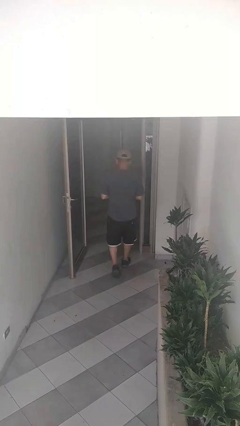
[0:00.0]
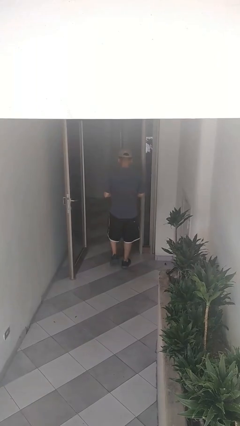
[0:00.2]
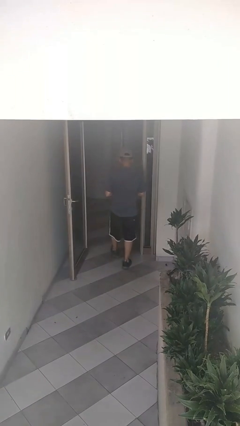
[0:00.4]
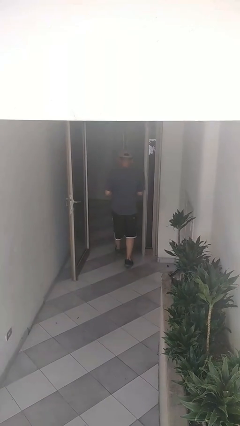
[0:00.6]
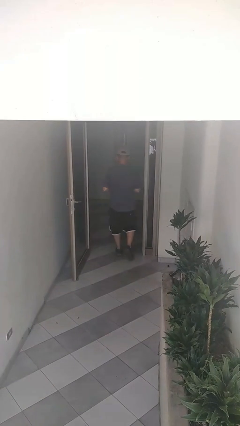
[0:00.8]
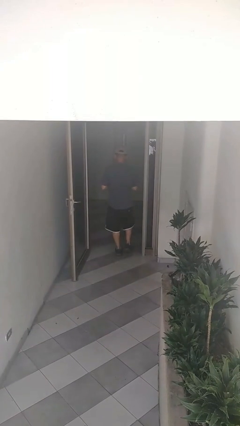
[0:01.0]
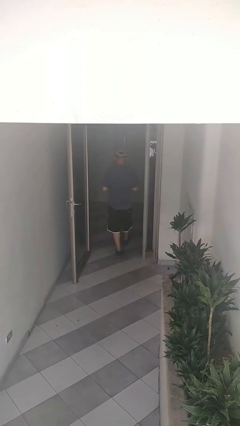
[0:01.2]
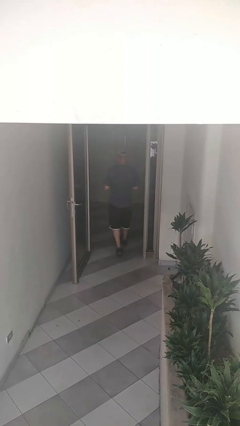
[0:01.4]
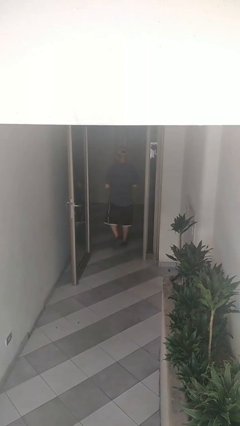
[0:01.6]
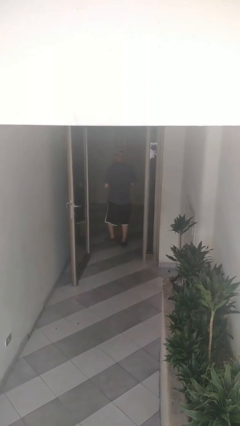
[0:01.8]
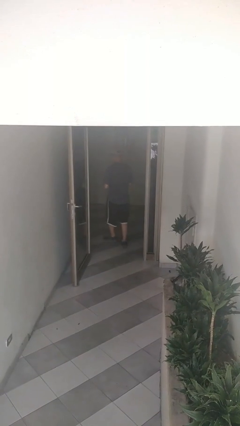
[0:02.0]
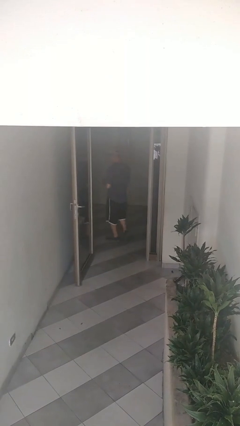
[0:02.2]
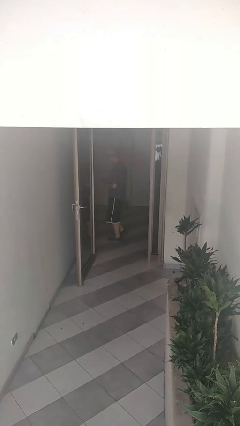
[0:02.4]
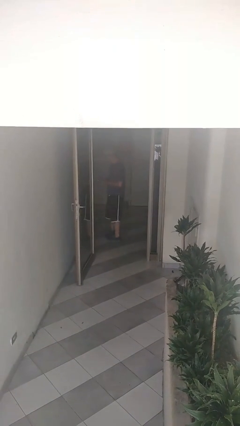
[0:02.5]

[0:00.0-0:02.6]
person exits scene through structure

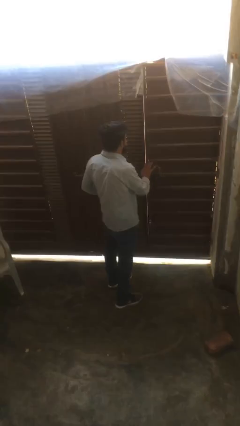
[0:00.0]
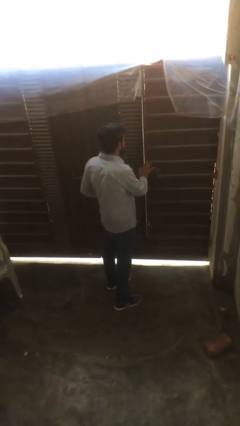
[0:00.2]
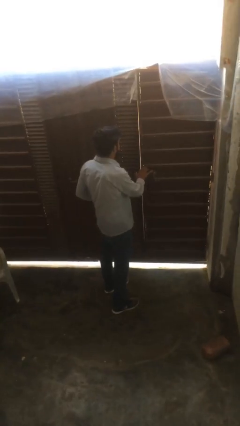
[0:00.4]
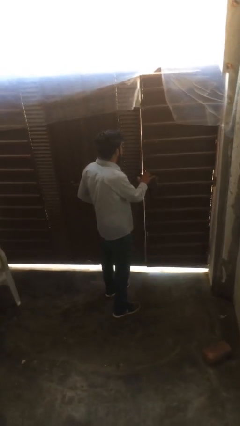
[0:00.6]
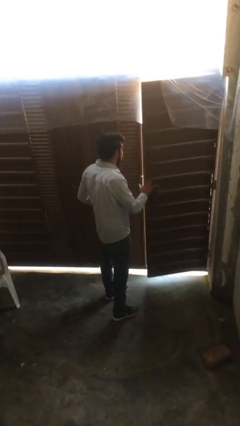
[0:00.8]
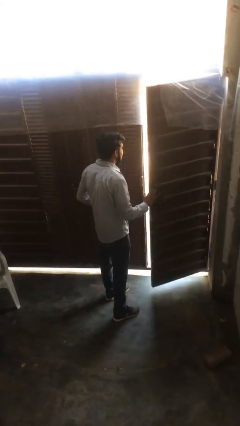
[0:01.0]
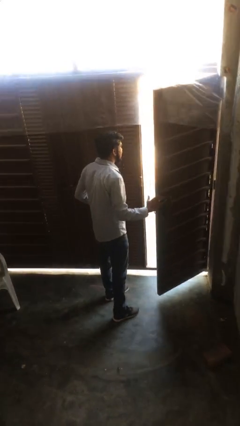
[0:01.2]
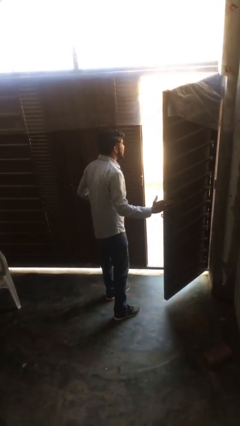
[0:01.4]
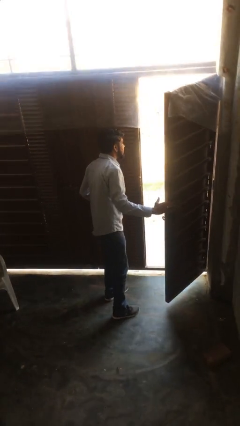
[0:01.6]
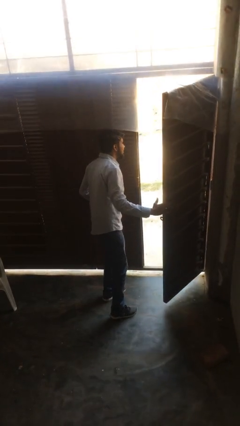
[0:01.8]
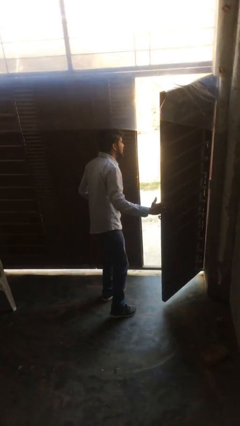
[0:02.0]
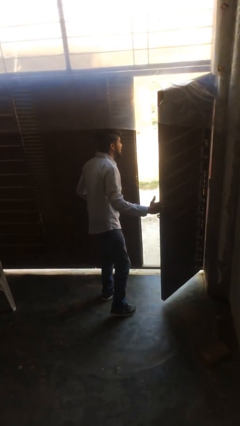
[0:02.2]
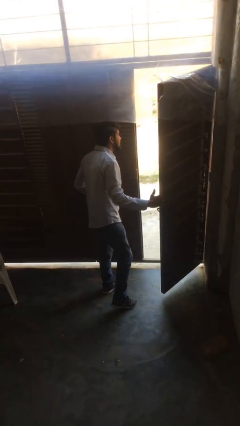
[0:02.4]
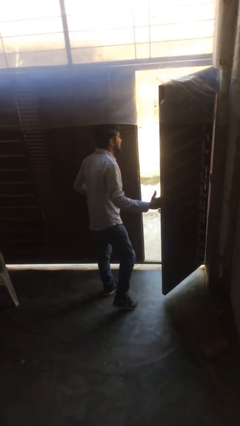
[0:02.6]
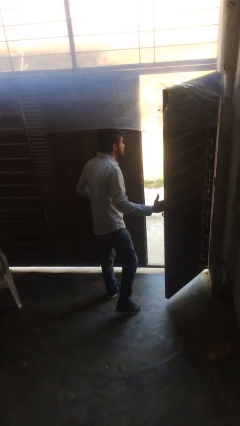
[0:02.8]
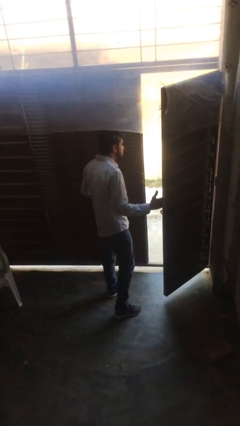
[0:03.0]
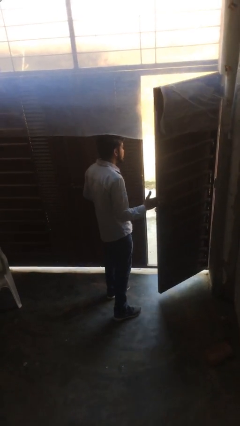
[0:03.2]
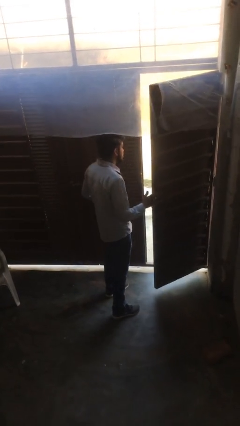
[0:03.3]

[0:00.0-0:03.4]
person opens facility door

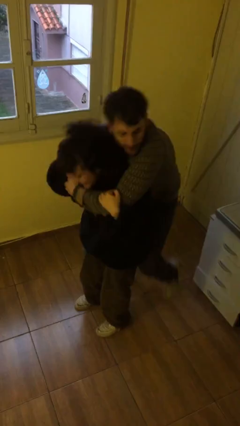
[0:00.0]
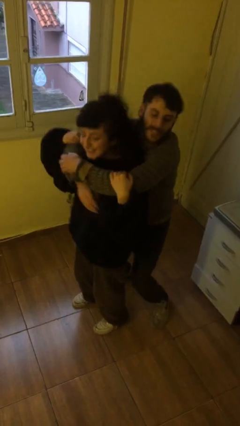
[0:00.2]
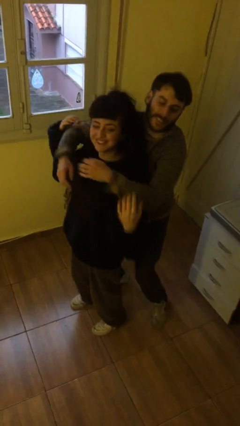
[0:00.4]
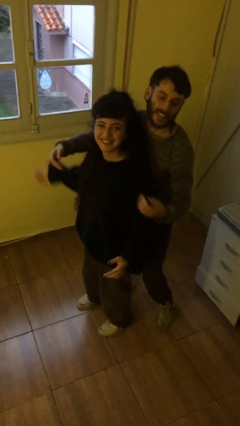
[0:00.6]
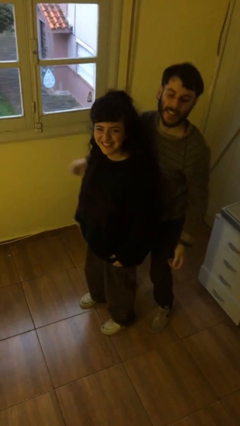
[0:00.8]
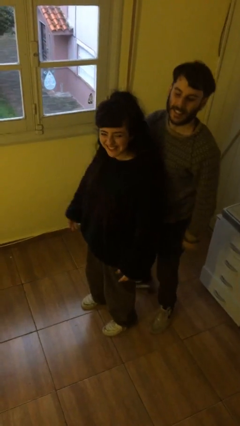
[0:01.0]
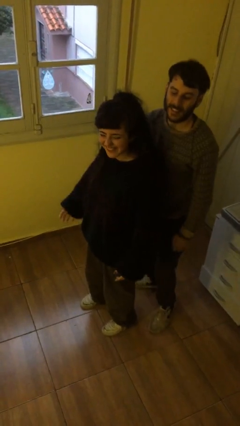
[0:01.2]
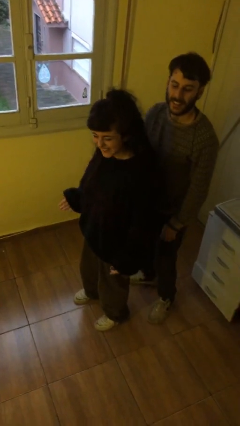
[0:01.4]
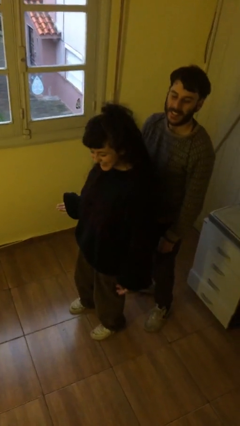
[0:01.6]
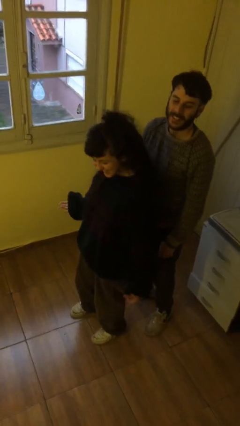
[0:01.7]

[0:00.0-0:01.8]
person puts down person

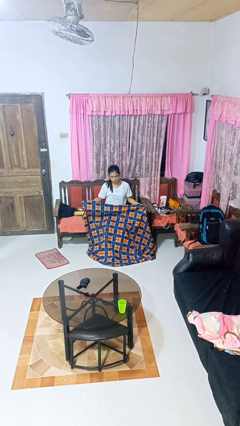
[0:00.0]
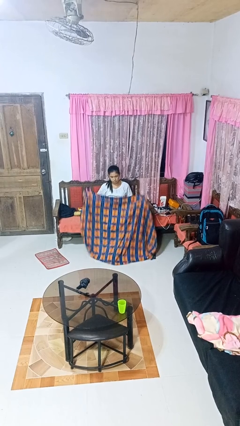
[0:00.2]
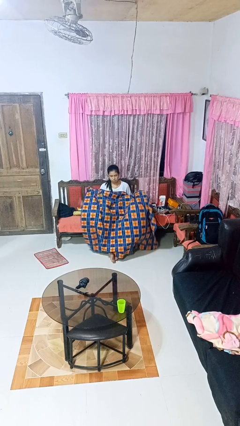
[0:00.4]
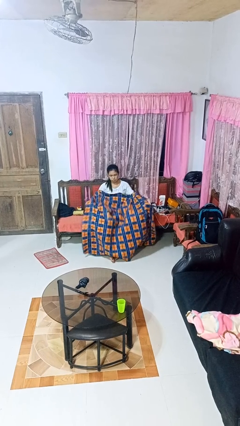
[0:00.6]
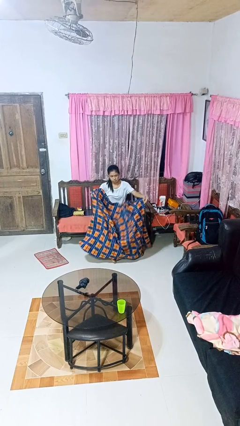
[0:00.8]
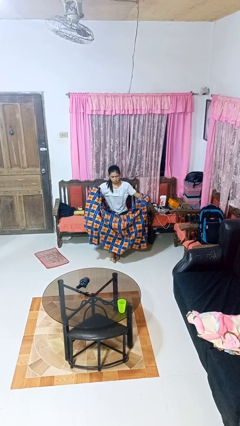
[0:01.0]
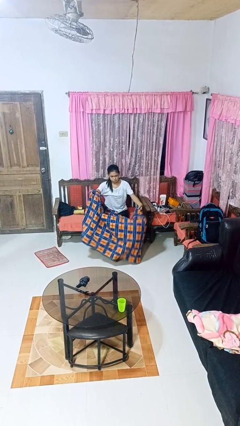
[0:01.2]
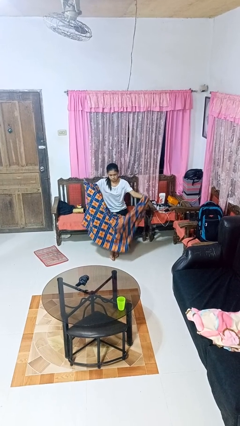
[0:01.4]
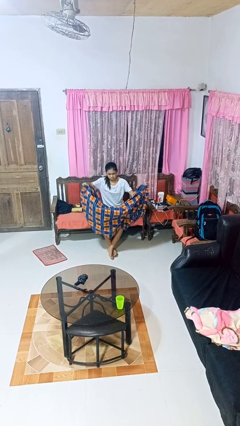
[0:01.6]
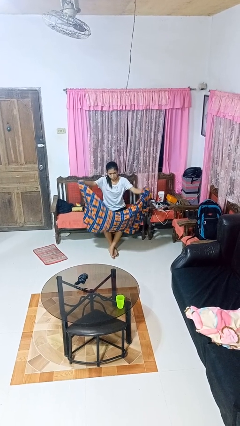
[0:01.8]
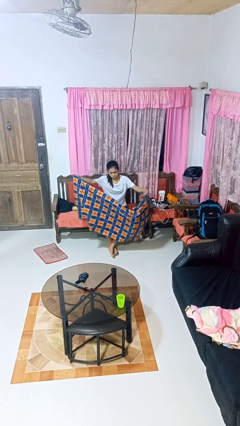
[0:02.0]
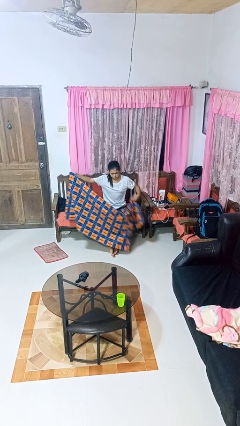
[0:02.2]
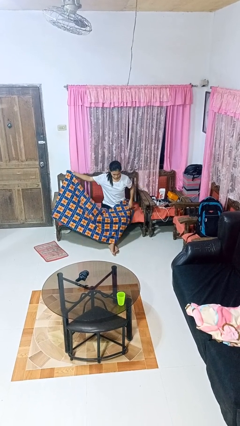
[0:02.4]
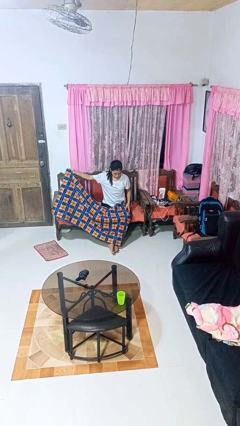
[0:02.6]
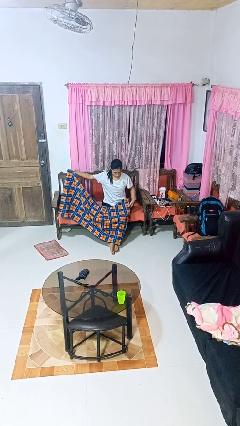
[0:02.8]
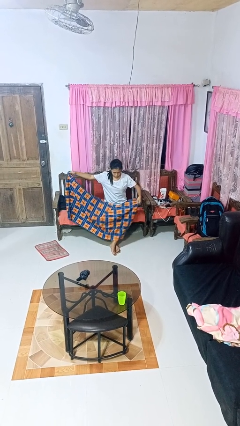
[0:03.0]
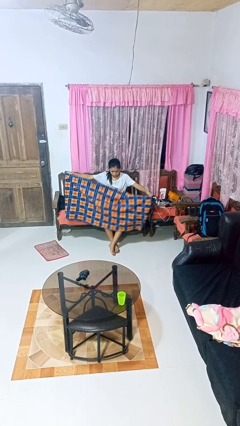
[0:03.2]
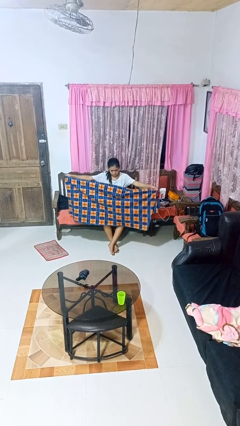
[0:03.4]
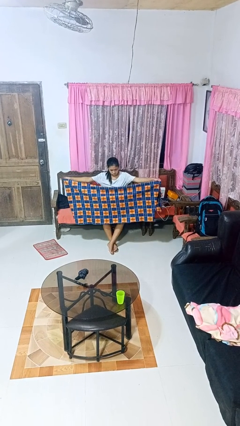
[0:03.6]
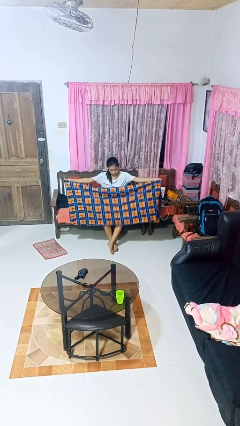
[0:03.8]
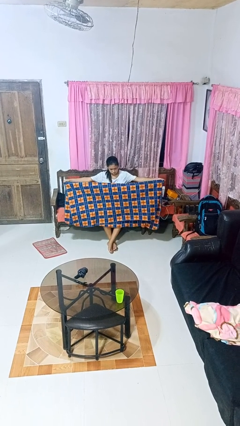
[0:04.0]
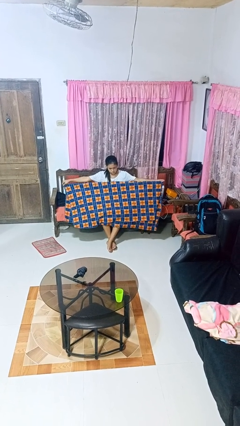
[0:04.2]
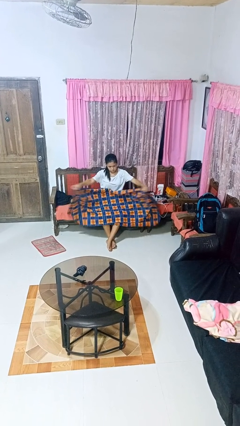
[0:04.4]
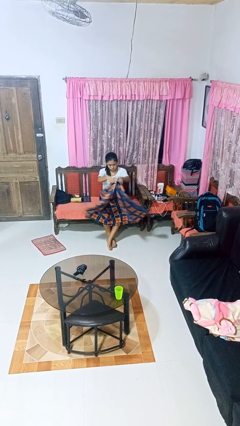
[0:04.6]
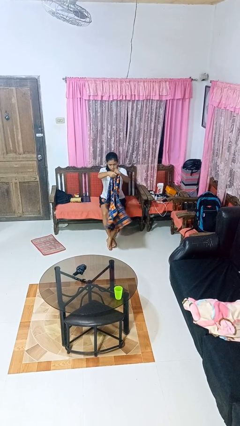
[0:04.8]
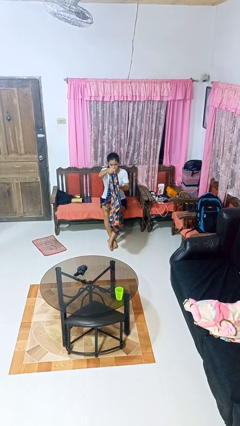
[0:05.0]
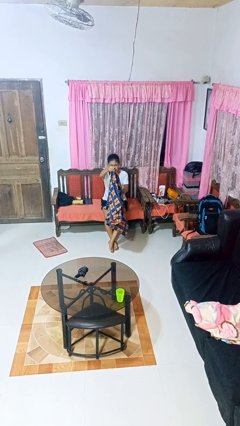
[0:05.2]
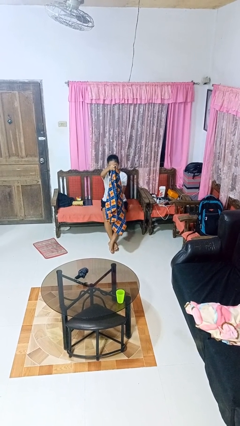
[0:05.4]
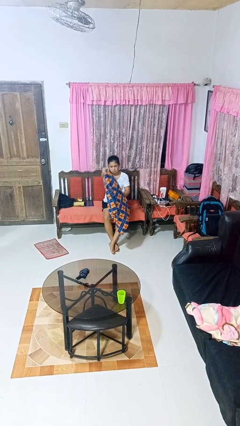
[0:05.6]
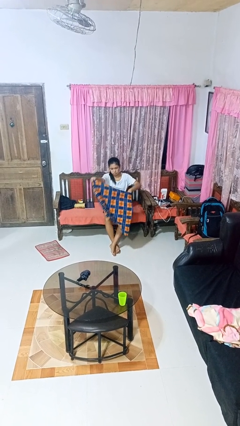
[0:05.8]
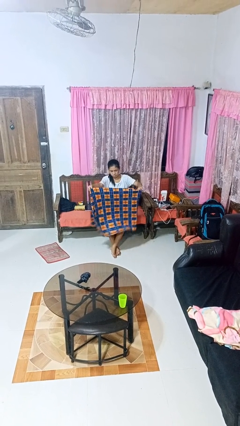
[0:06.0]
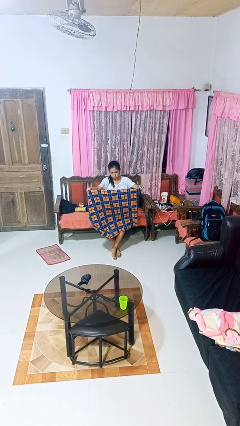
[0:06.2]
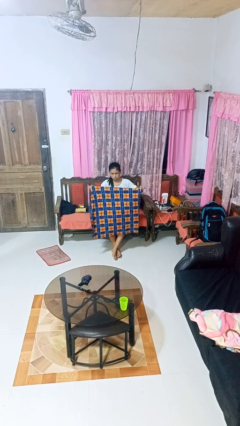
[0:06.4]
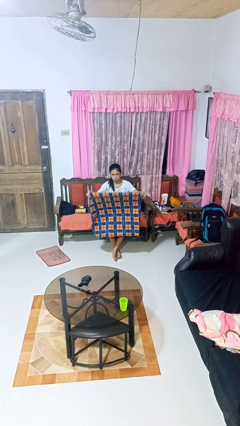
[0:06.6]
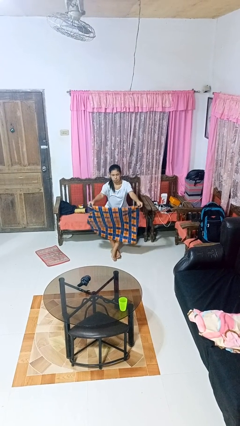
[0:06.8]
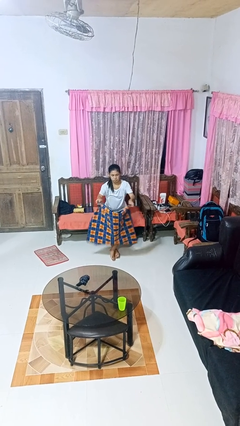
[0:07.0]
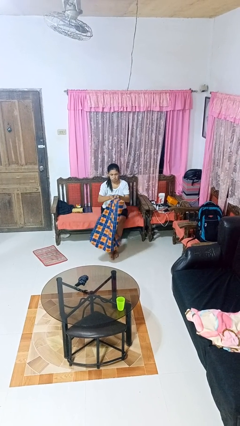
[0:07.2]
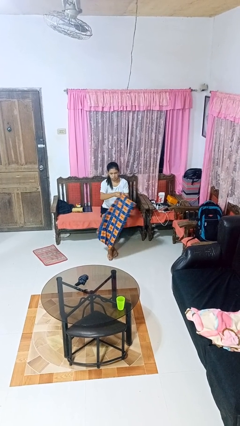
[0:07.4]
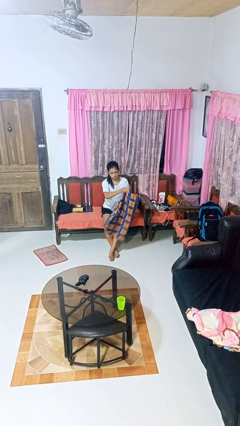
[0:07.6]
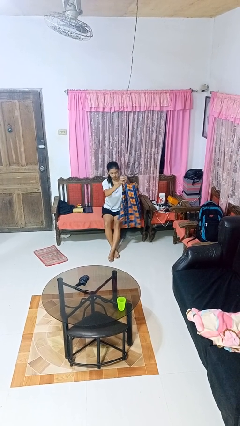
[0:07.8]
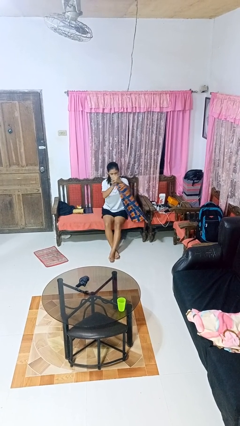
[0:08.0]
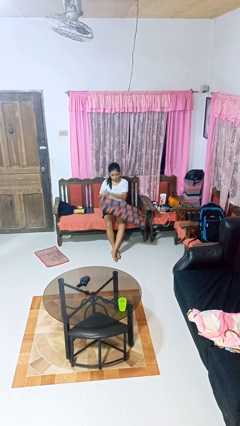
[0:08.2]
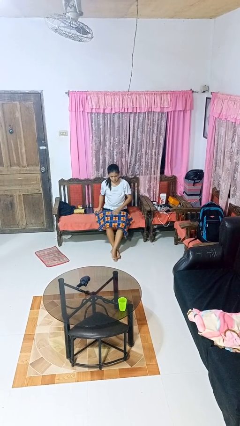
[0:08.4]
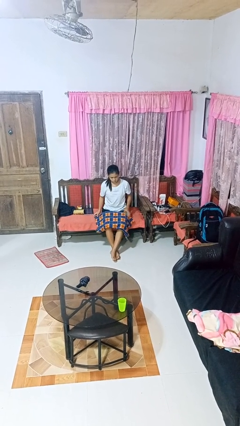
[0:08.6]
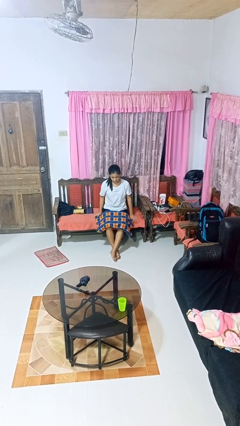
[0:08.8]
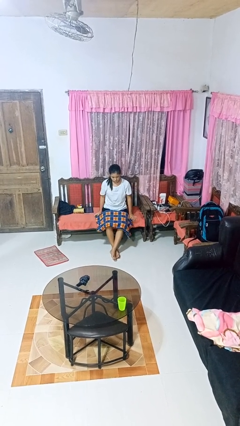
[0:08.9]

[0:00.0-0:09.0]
person folds blanket

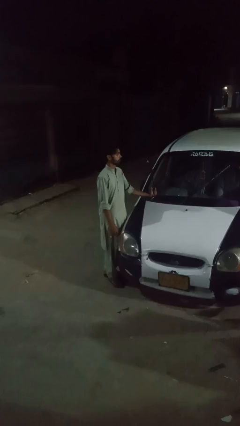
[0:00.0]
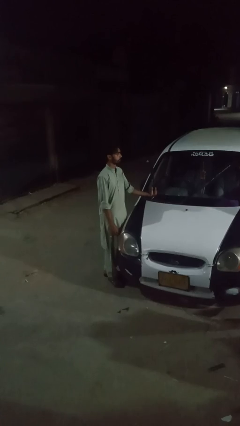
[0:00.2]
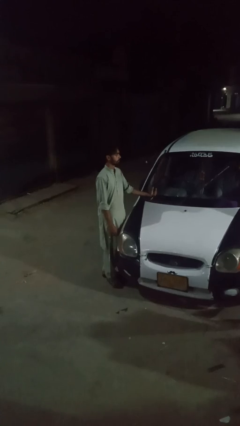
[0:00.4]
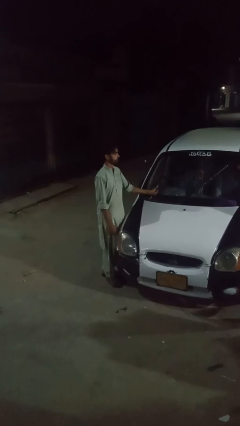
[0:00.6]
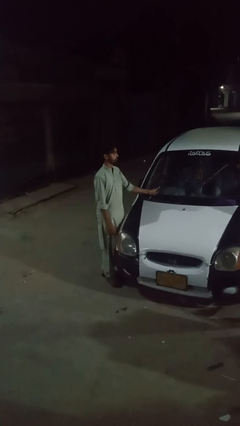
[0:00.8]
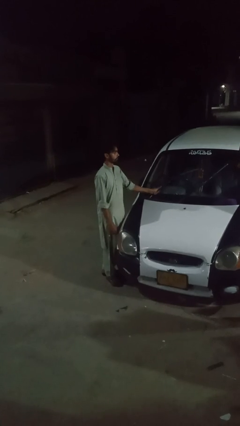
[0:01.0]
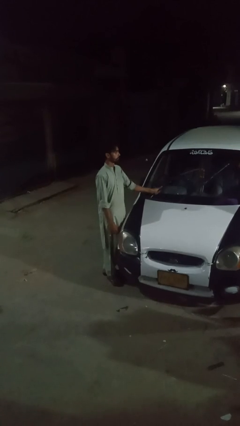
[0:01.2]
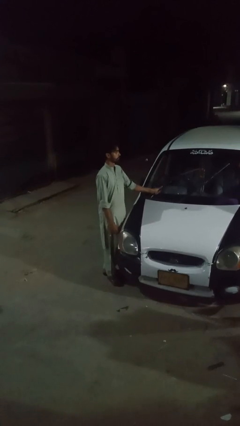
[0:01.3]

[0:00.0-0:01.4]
person flips down car wipers
